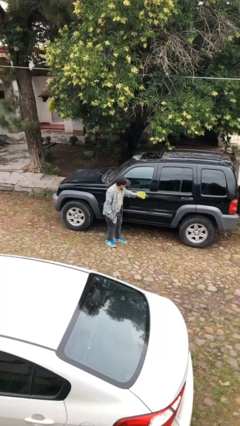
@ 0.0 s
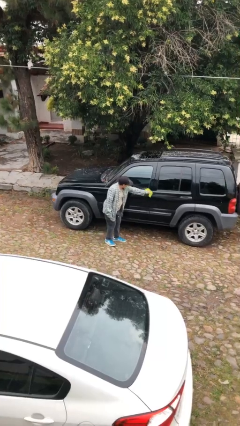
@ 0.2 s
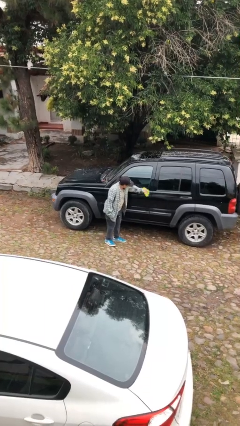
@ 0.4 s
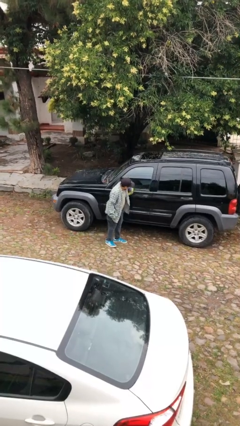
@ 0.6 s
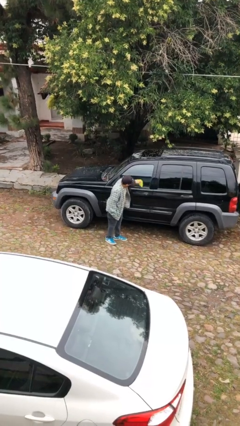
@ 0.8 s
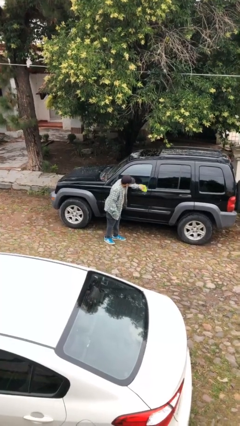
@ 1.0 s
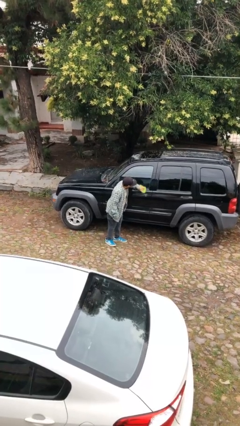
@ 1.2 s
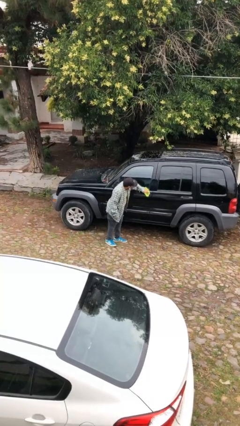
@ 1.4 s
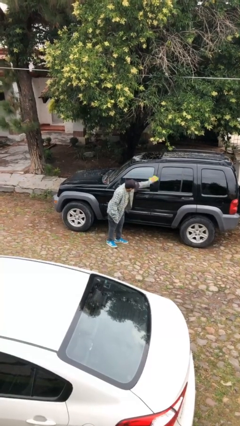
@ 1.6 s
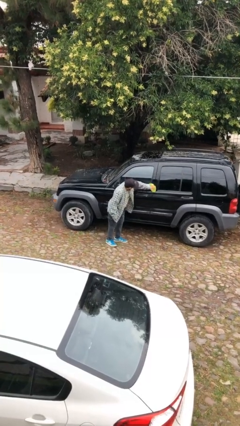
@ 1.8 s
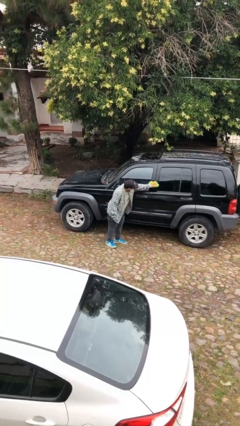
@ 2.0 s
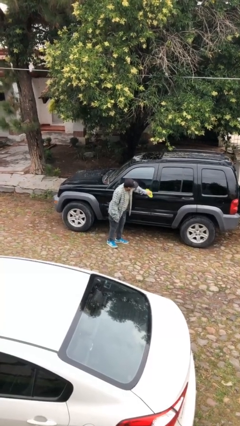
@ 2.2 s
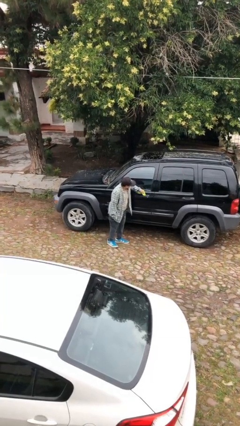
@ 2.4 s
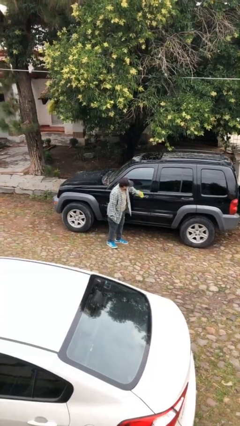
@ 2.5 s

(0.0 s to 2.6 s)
person polishes car with rag

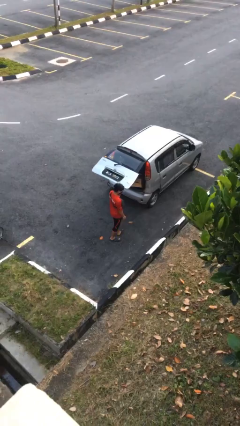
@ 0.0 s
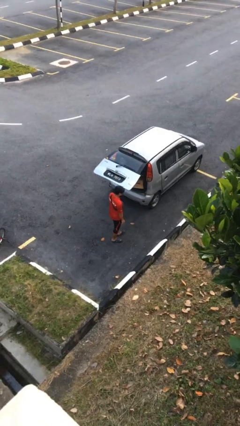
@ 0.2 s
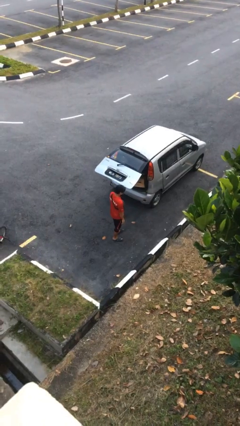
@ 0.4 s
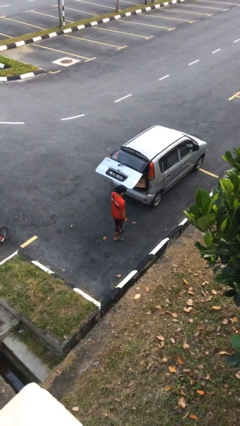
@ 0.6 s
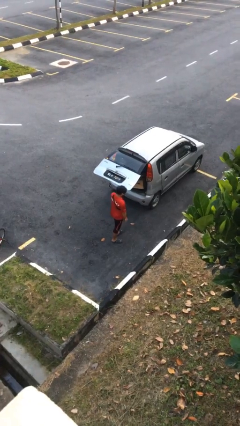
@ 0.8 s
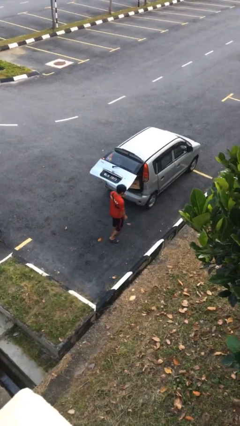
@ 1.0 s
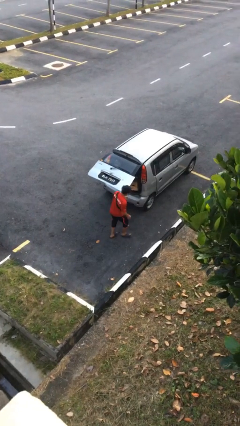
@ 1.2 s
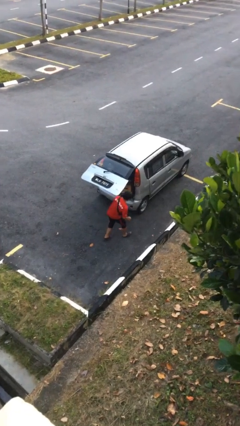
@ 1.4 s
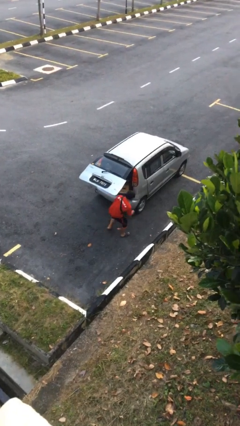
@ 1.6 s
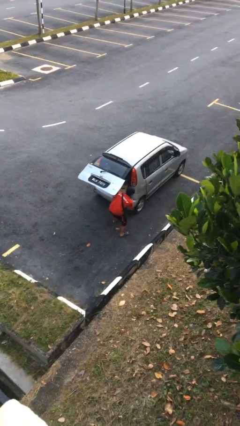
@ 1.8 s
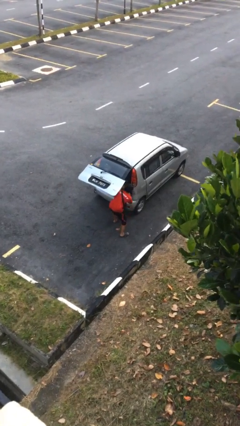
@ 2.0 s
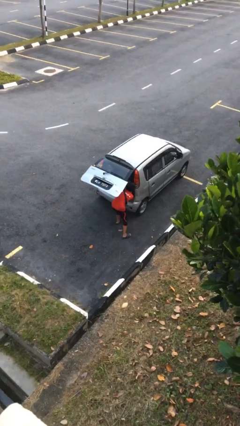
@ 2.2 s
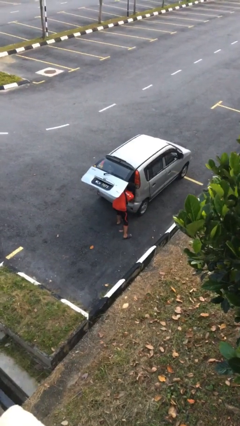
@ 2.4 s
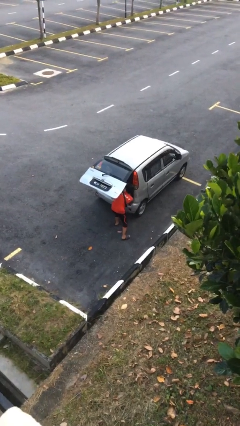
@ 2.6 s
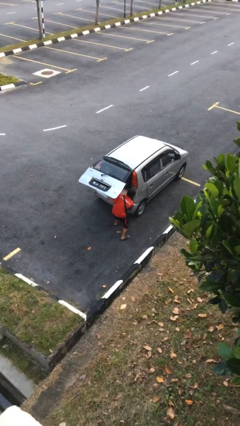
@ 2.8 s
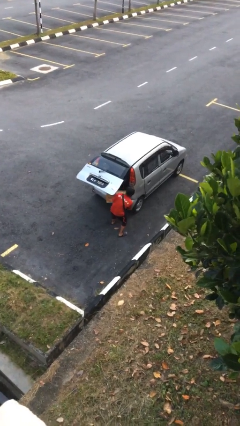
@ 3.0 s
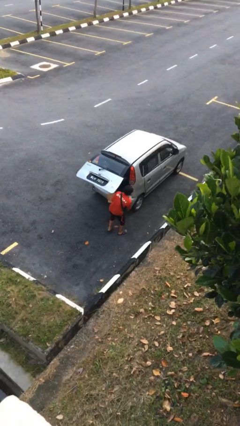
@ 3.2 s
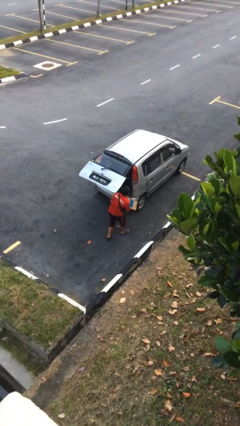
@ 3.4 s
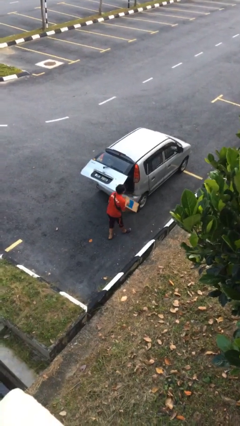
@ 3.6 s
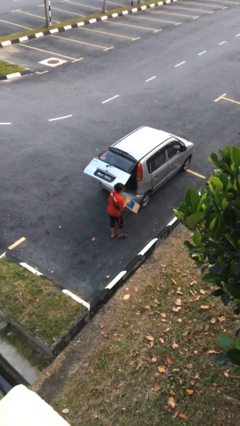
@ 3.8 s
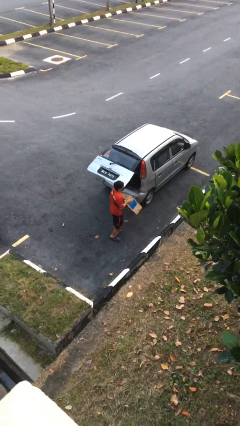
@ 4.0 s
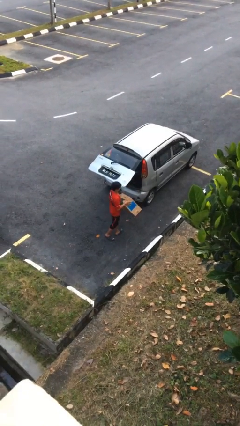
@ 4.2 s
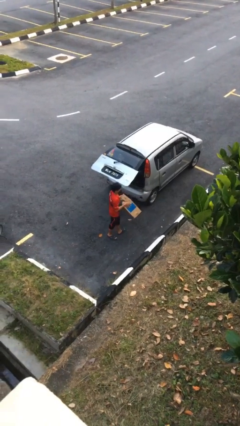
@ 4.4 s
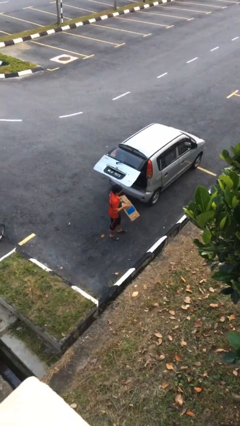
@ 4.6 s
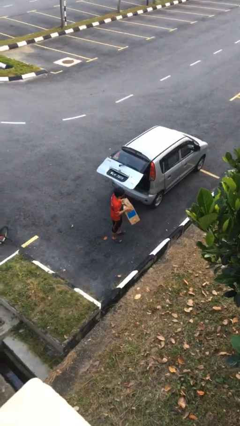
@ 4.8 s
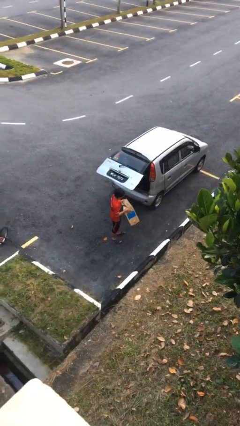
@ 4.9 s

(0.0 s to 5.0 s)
person unloads car

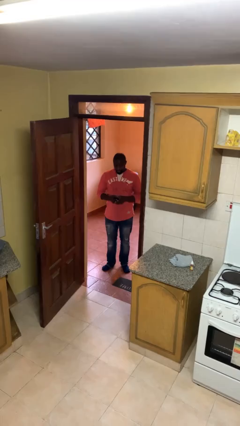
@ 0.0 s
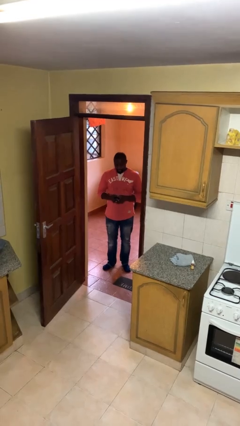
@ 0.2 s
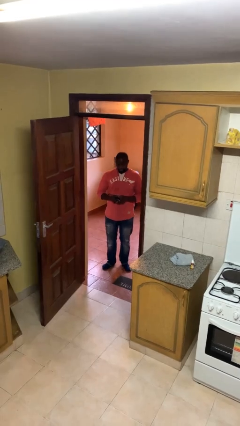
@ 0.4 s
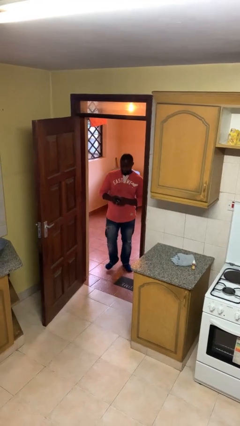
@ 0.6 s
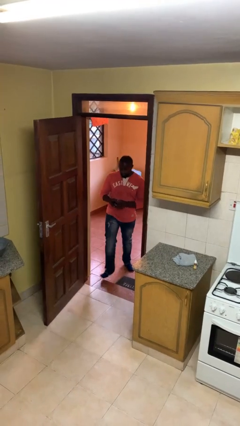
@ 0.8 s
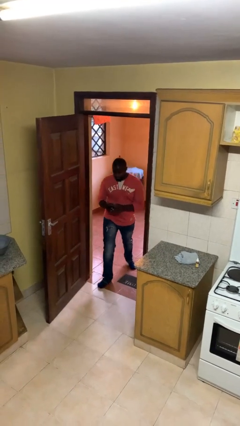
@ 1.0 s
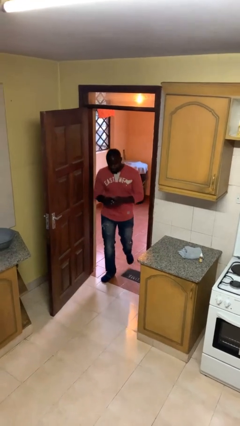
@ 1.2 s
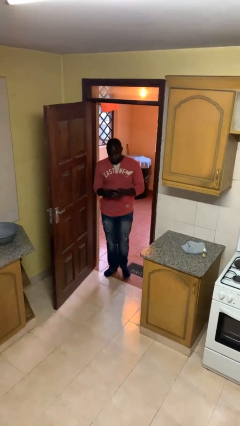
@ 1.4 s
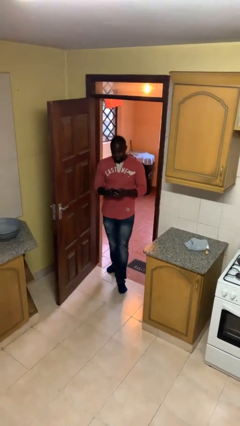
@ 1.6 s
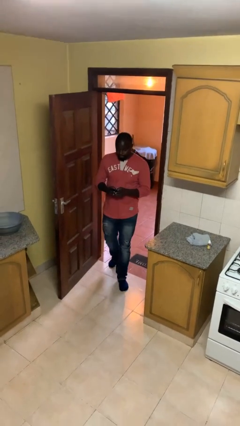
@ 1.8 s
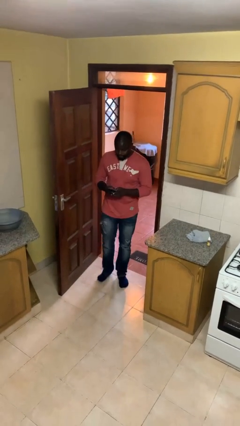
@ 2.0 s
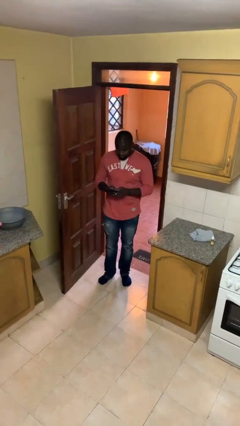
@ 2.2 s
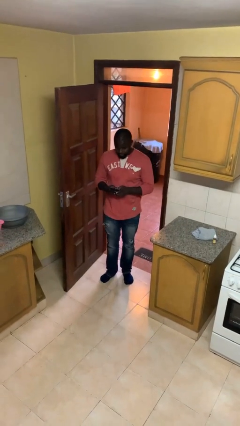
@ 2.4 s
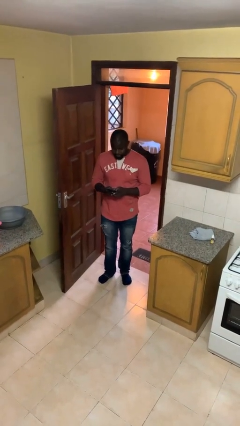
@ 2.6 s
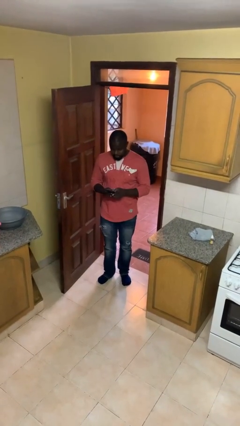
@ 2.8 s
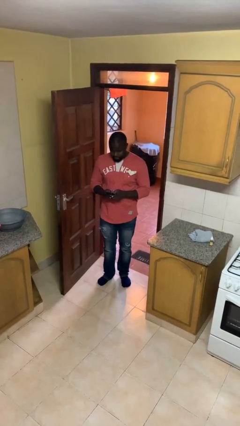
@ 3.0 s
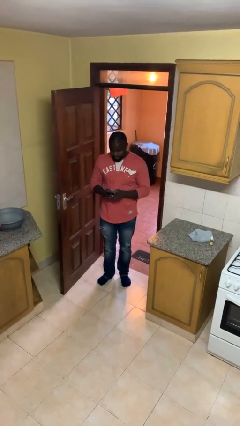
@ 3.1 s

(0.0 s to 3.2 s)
person enters scene through structure

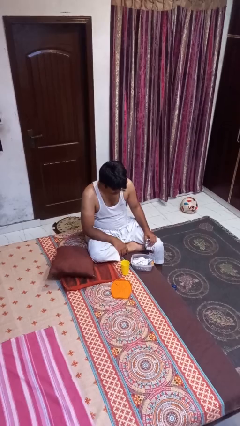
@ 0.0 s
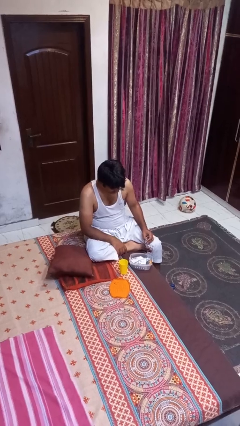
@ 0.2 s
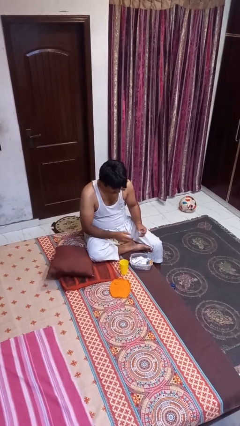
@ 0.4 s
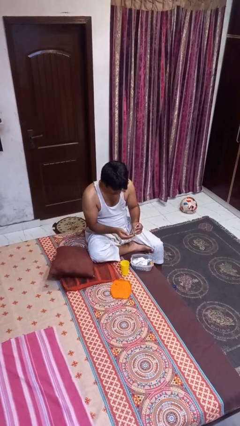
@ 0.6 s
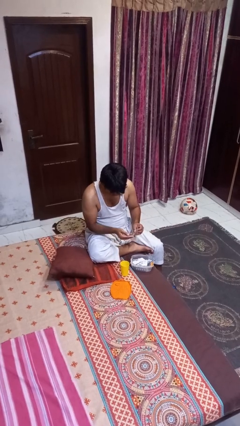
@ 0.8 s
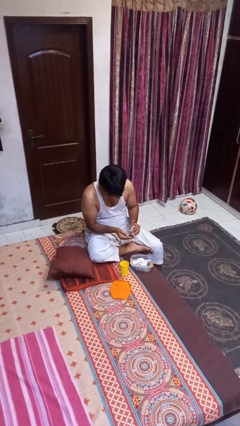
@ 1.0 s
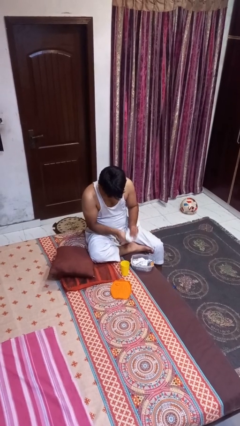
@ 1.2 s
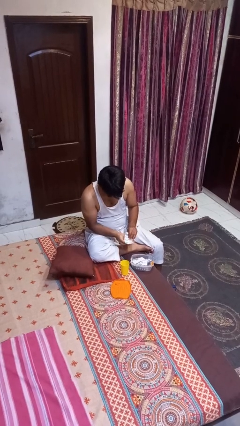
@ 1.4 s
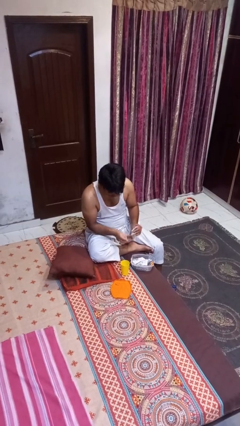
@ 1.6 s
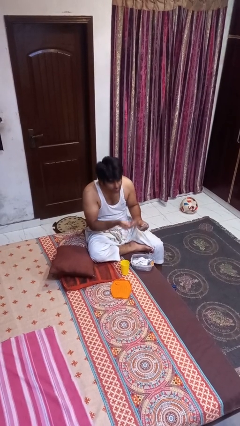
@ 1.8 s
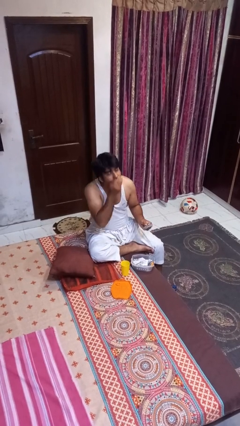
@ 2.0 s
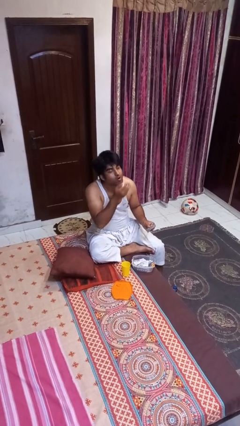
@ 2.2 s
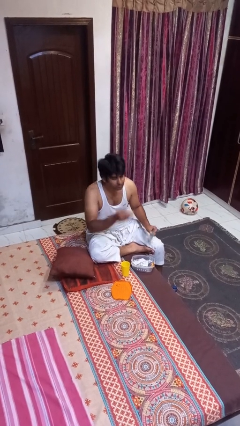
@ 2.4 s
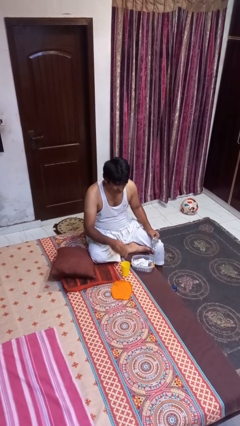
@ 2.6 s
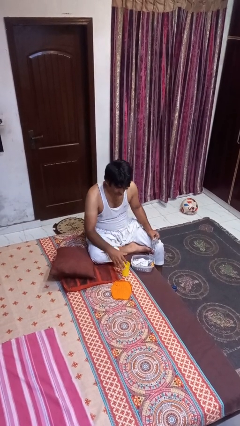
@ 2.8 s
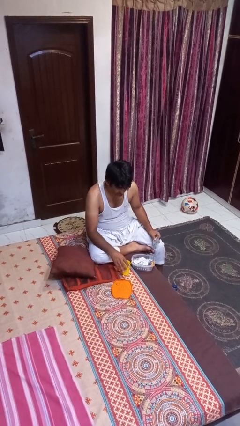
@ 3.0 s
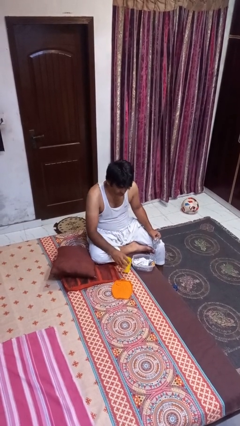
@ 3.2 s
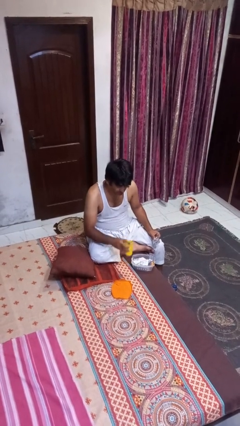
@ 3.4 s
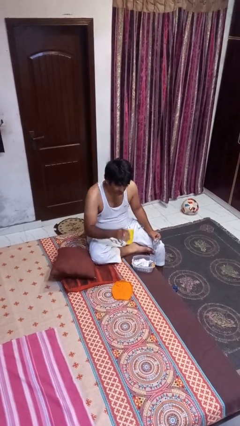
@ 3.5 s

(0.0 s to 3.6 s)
person takes medicine pills

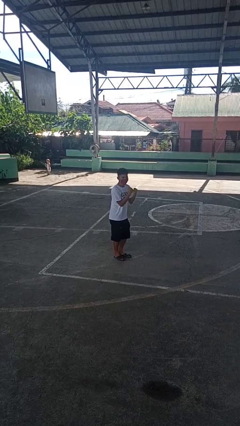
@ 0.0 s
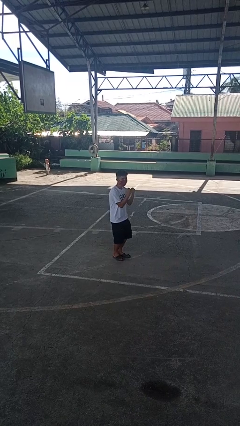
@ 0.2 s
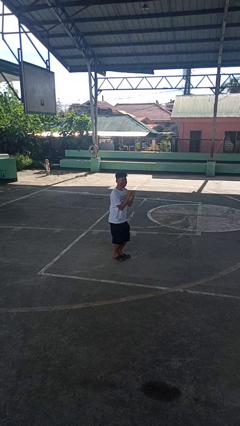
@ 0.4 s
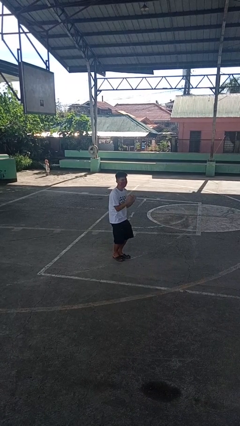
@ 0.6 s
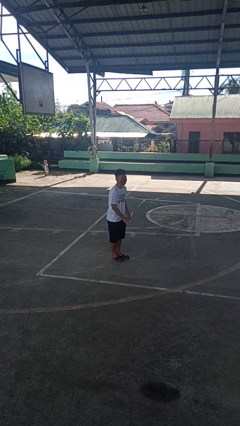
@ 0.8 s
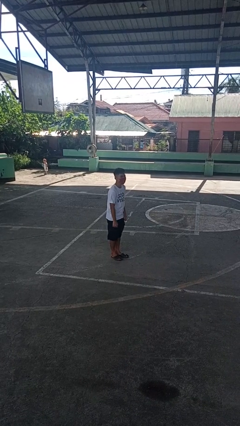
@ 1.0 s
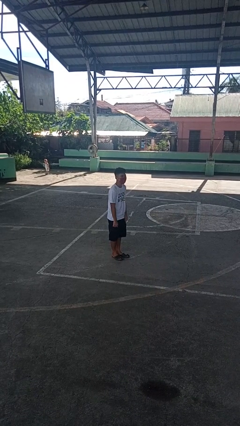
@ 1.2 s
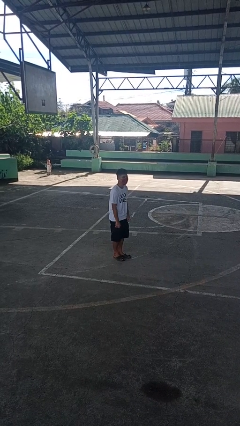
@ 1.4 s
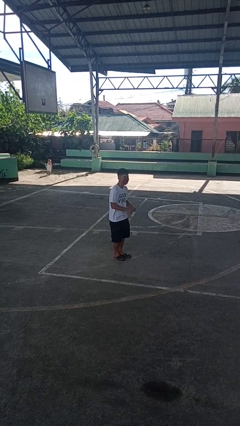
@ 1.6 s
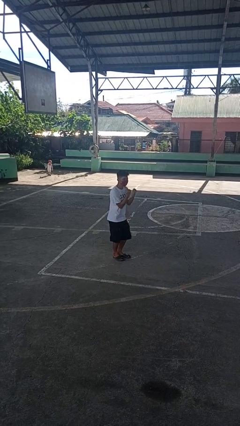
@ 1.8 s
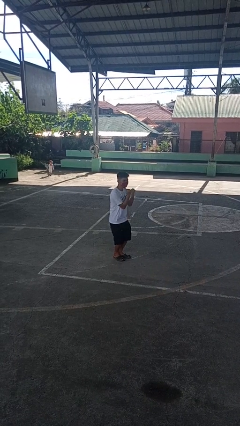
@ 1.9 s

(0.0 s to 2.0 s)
person dances in place

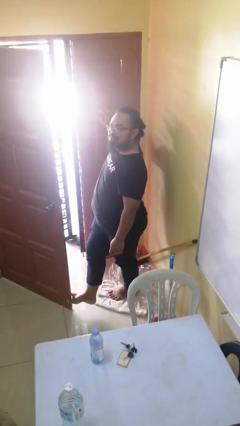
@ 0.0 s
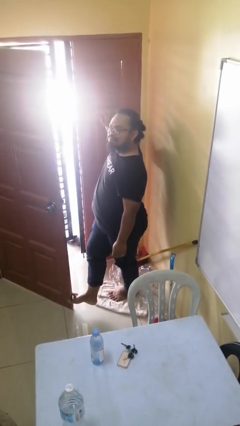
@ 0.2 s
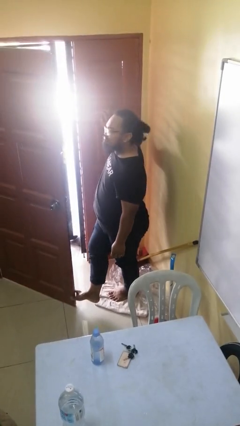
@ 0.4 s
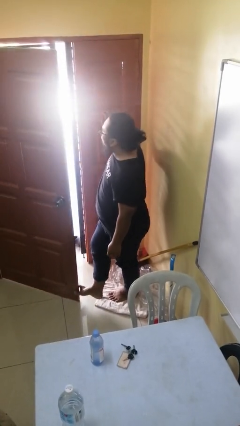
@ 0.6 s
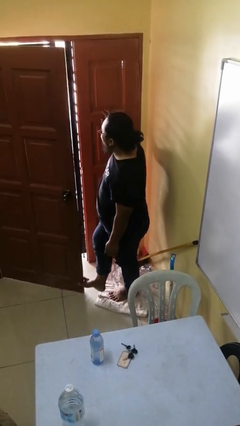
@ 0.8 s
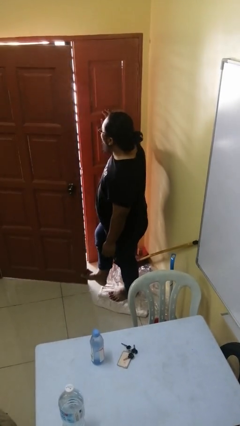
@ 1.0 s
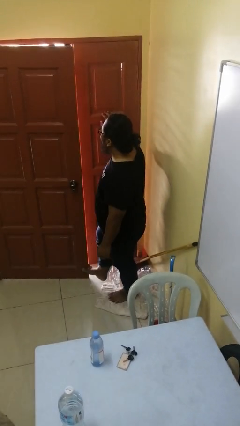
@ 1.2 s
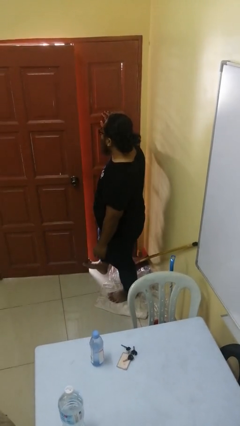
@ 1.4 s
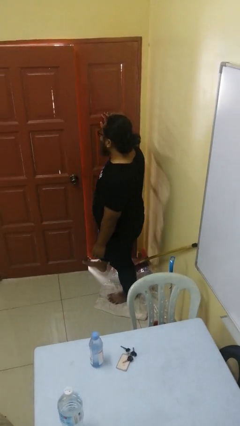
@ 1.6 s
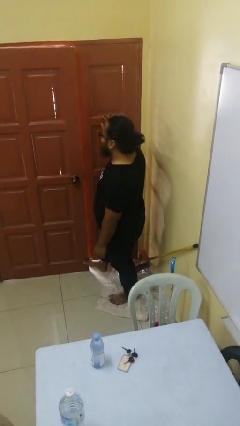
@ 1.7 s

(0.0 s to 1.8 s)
person closes door with foot
